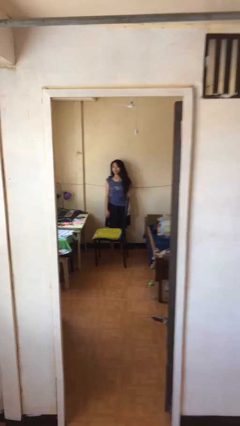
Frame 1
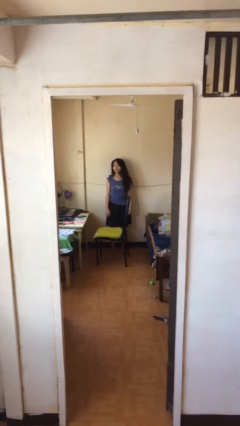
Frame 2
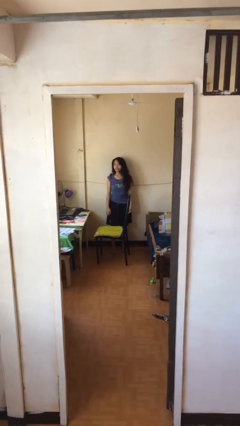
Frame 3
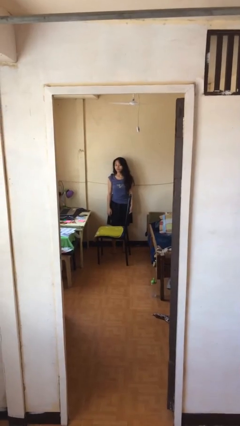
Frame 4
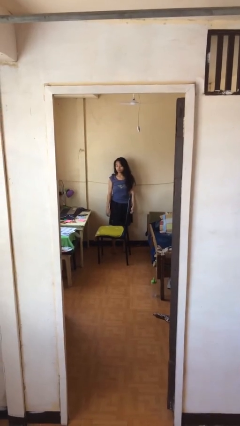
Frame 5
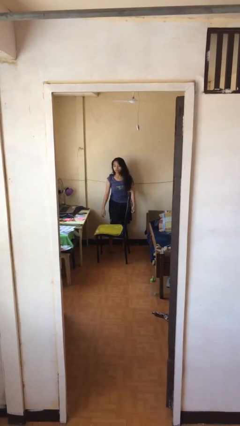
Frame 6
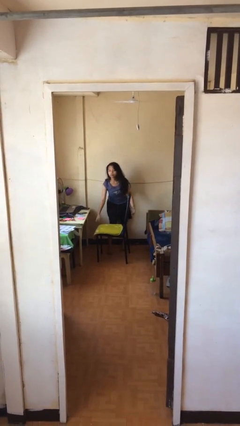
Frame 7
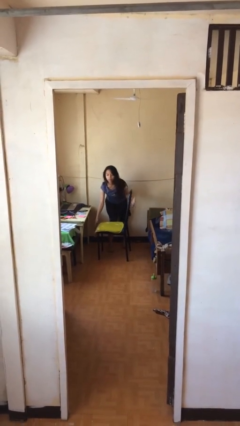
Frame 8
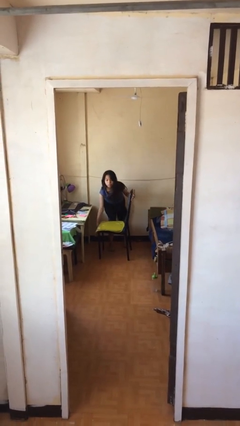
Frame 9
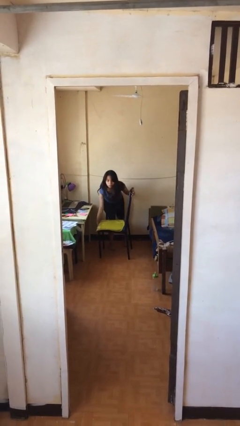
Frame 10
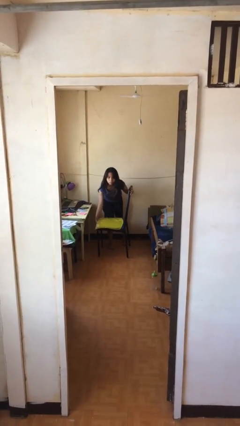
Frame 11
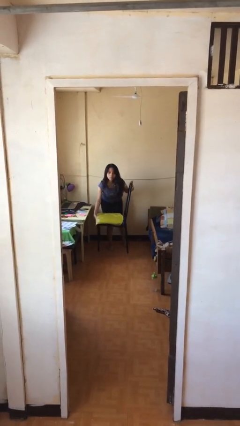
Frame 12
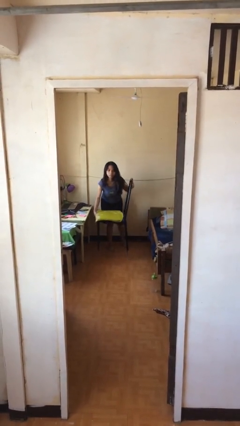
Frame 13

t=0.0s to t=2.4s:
person picks up object from floor

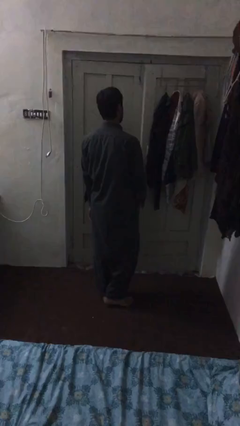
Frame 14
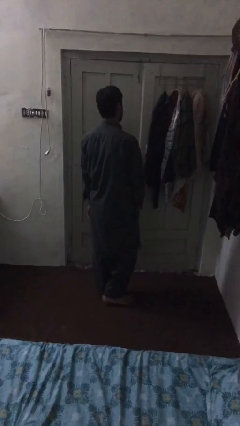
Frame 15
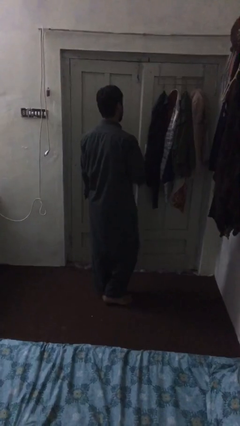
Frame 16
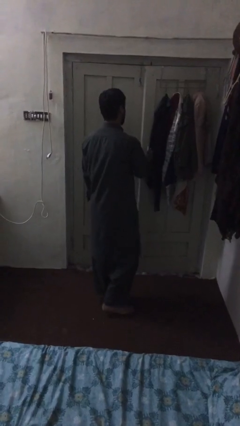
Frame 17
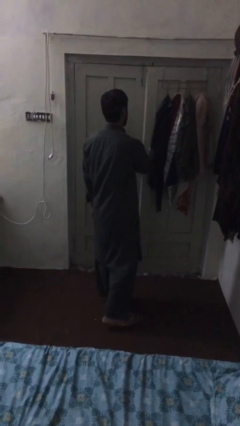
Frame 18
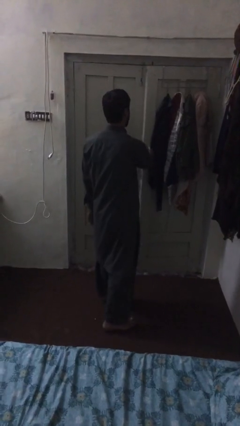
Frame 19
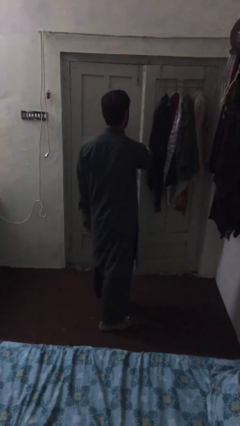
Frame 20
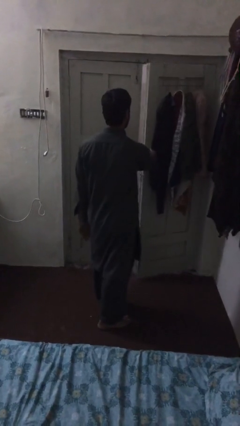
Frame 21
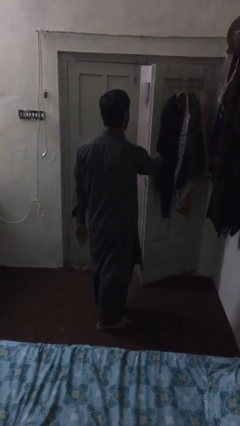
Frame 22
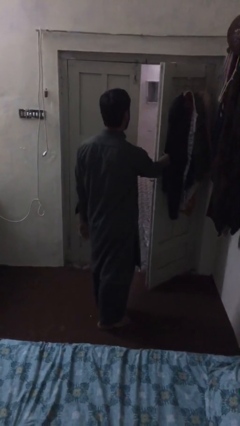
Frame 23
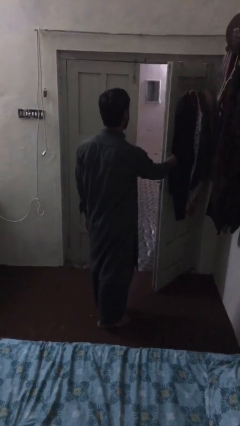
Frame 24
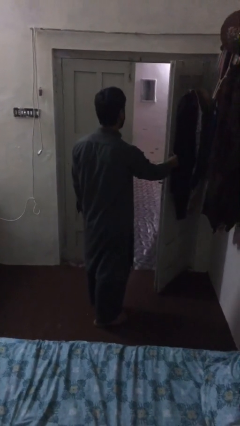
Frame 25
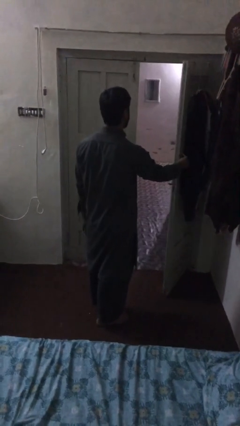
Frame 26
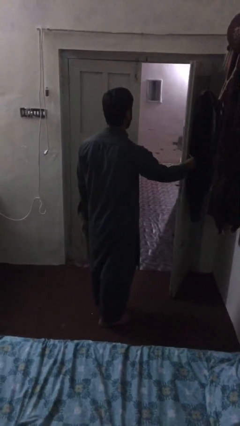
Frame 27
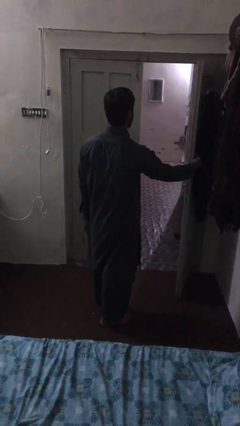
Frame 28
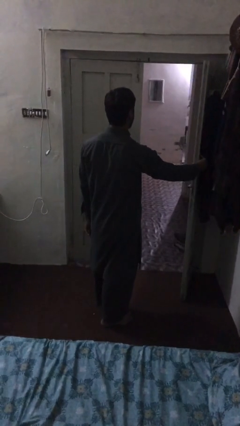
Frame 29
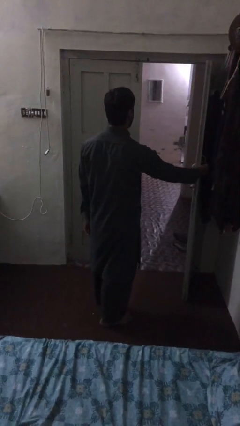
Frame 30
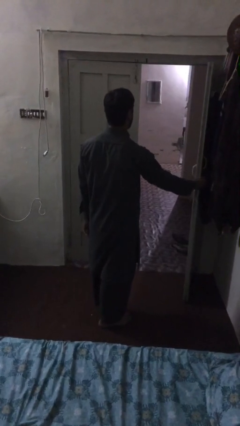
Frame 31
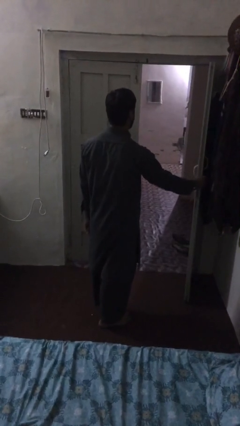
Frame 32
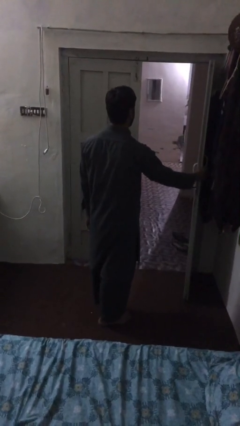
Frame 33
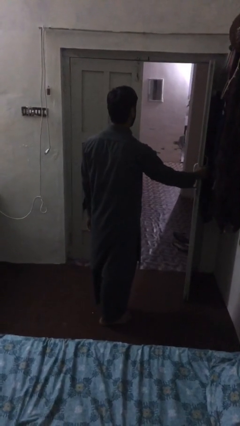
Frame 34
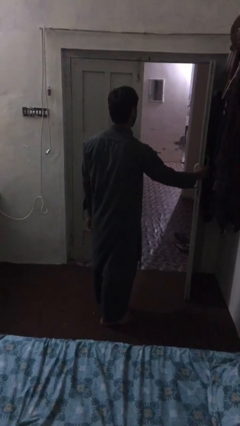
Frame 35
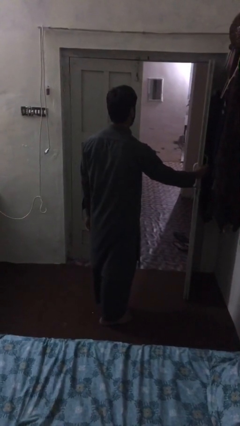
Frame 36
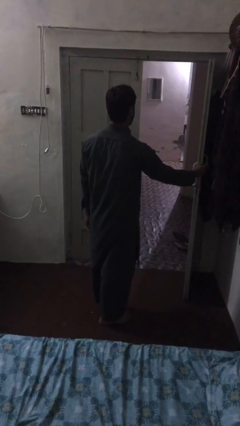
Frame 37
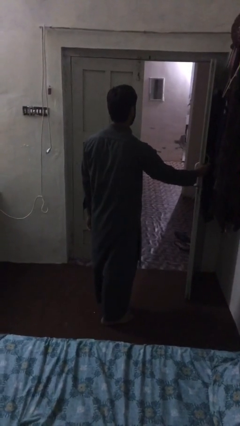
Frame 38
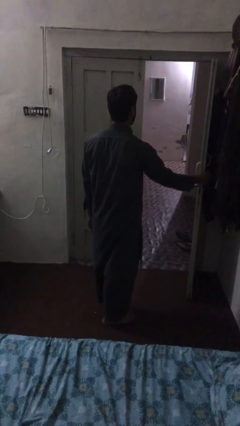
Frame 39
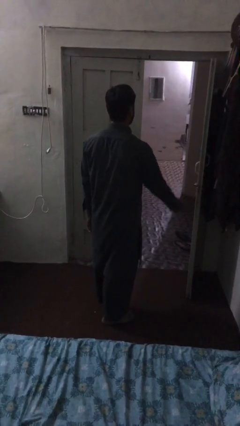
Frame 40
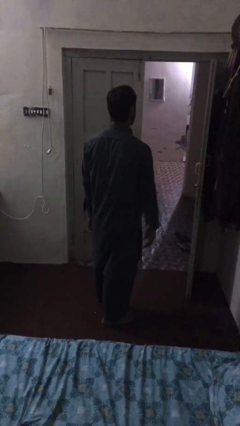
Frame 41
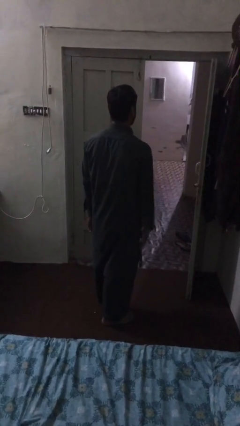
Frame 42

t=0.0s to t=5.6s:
person opens facility door

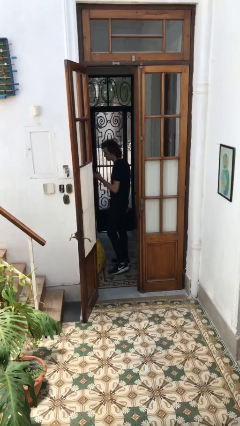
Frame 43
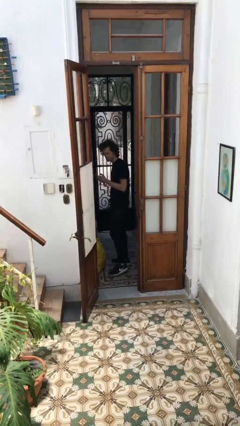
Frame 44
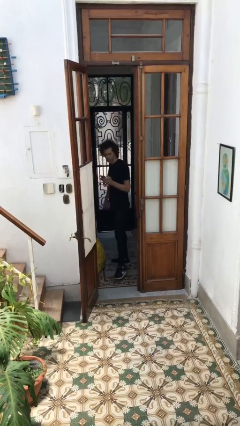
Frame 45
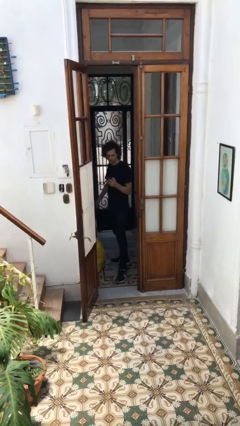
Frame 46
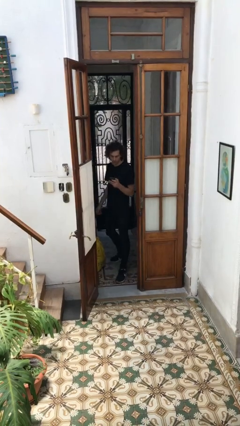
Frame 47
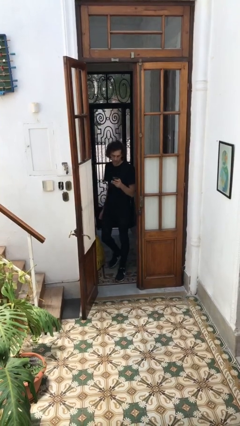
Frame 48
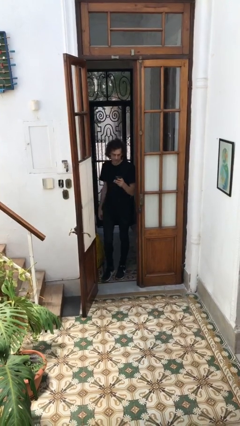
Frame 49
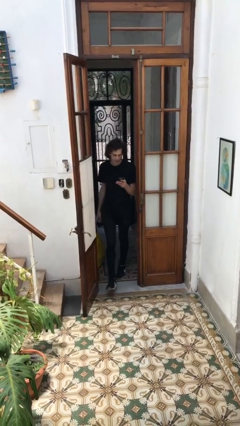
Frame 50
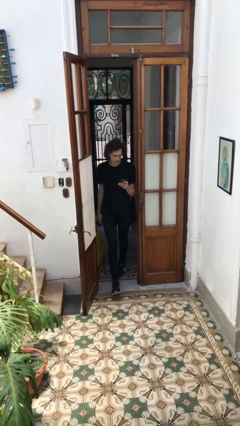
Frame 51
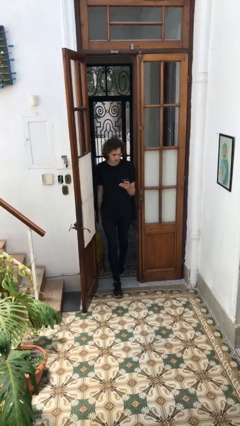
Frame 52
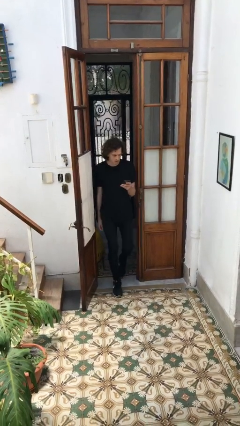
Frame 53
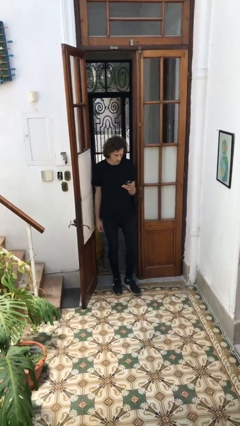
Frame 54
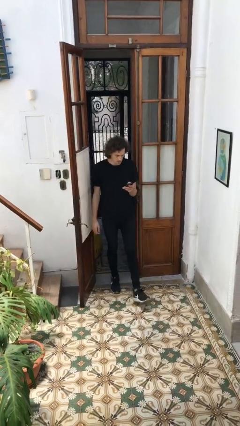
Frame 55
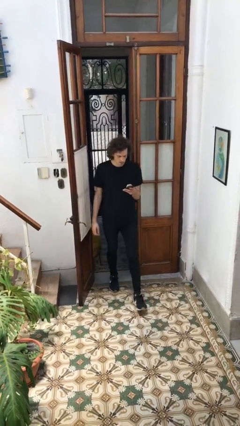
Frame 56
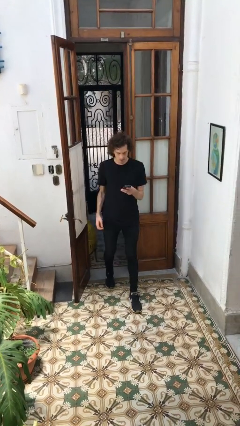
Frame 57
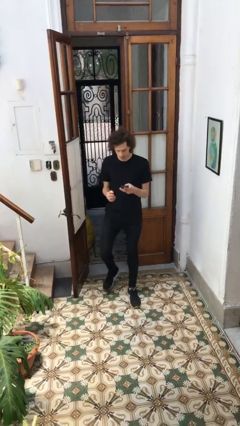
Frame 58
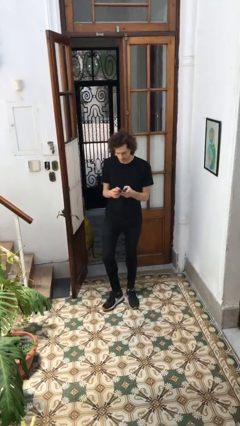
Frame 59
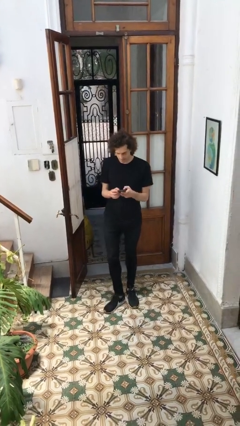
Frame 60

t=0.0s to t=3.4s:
person enters scene through structure

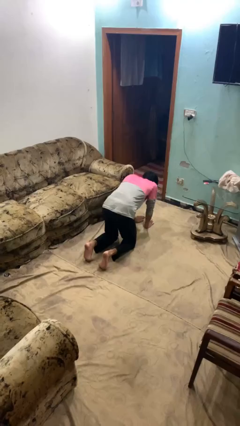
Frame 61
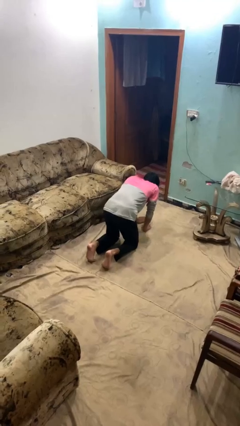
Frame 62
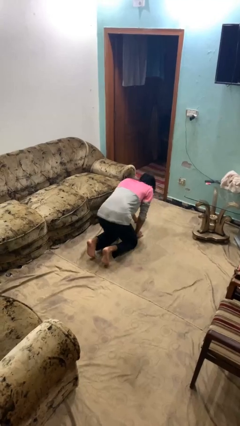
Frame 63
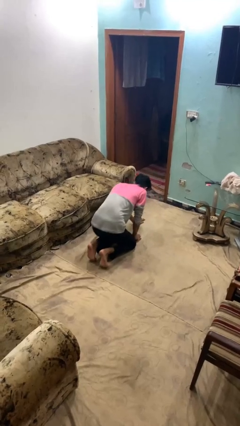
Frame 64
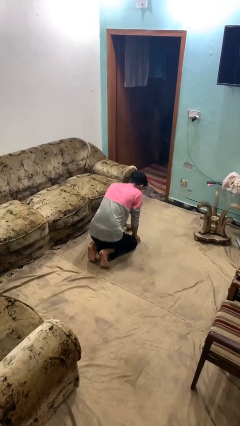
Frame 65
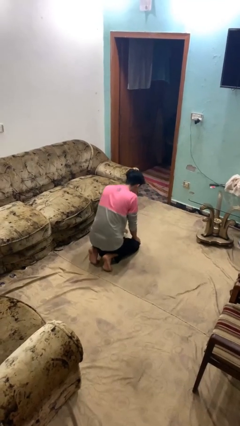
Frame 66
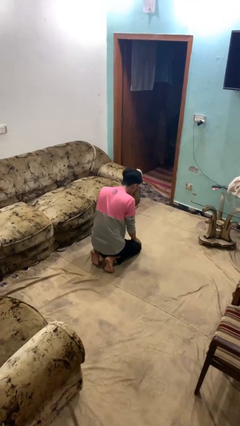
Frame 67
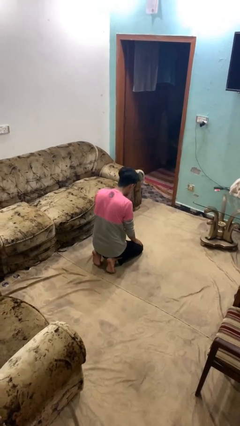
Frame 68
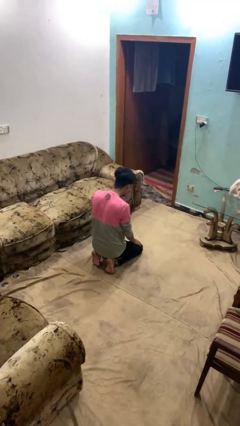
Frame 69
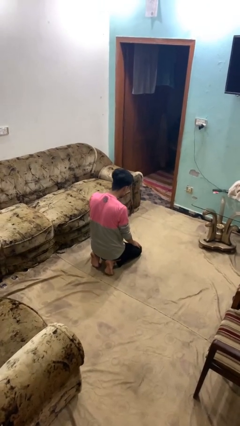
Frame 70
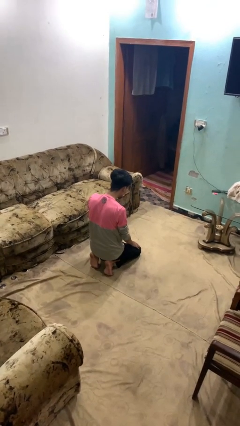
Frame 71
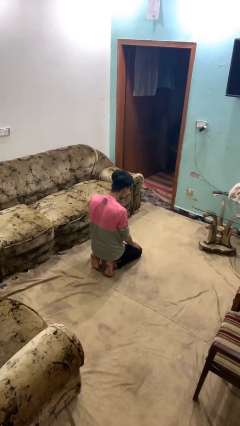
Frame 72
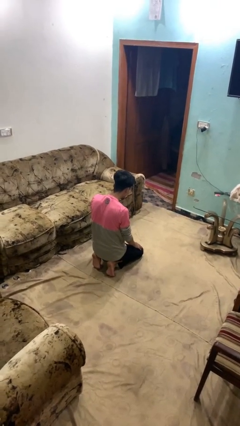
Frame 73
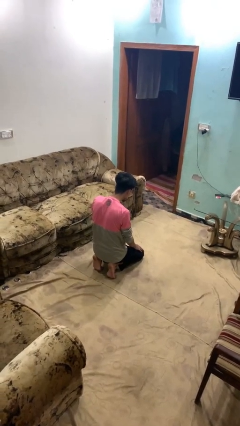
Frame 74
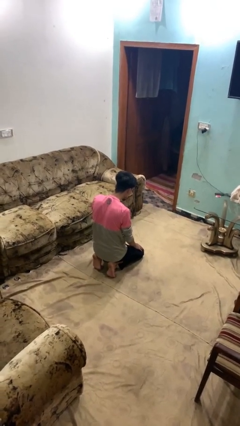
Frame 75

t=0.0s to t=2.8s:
person crawls

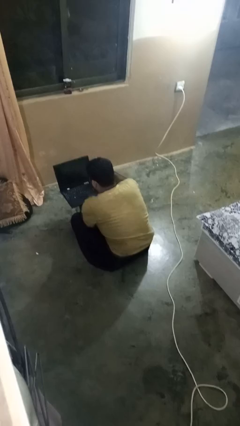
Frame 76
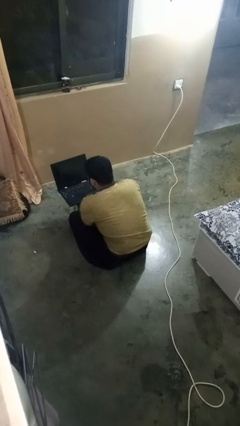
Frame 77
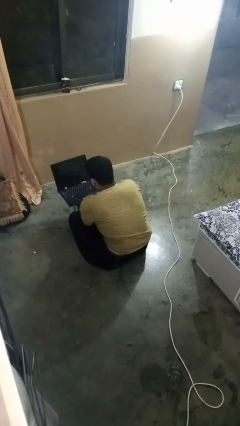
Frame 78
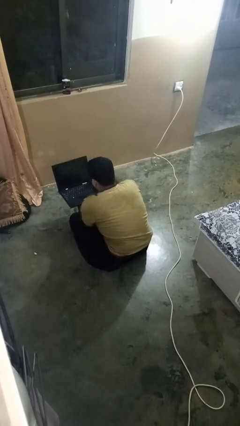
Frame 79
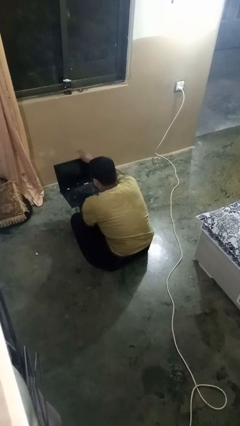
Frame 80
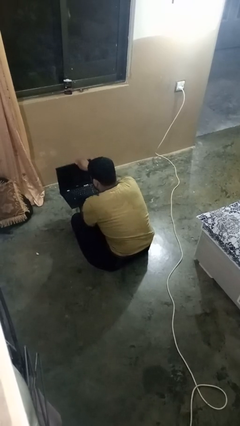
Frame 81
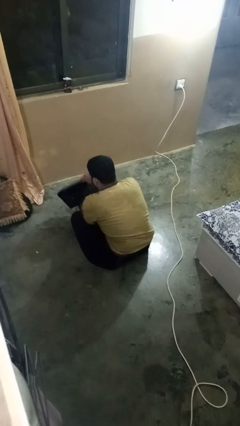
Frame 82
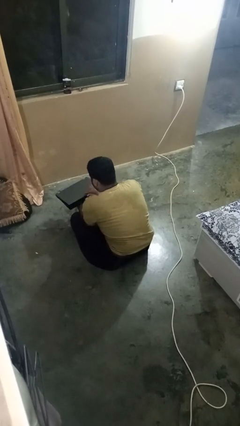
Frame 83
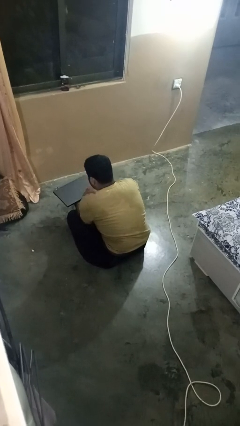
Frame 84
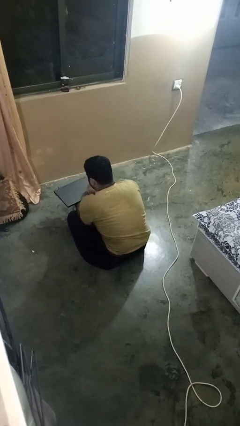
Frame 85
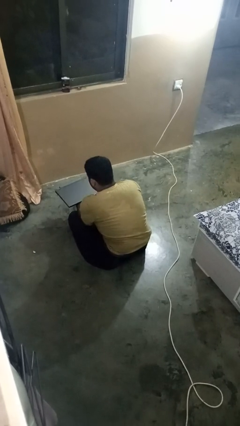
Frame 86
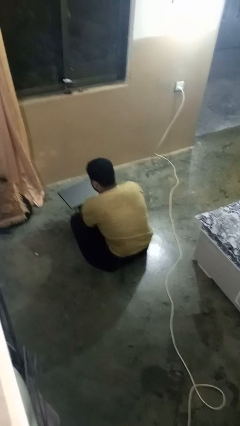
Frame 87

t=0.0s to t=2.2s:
person closes laptop

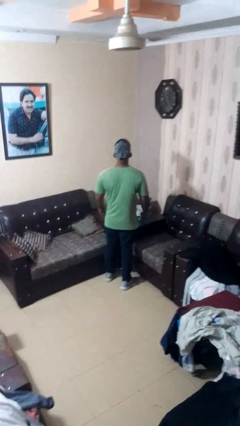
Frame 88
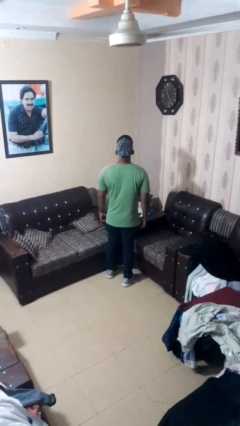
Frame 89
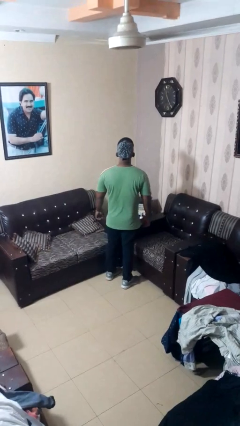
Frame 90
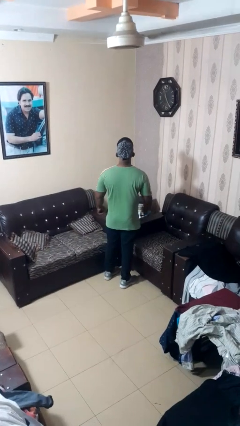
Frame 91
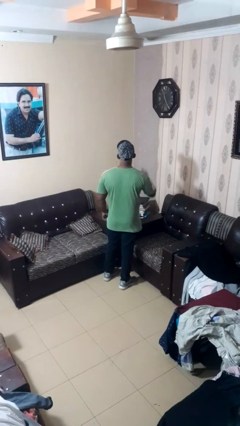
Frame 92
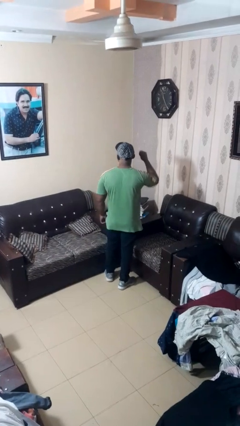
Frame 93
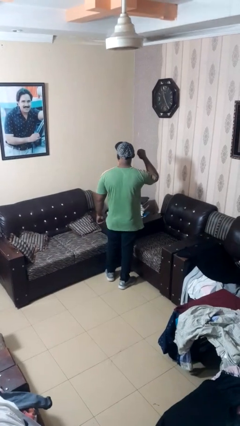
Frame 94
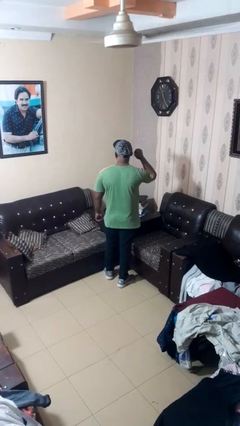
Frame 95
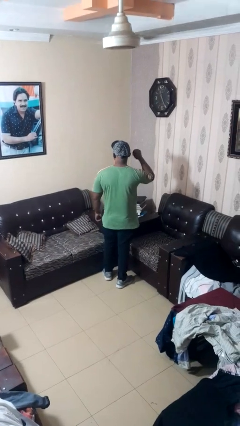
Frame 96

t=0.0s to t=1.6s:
person gestures behind me
